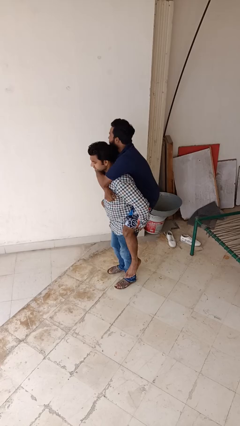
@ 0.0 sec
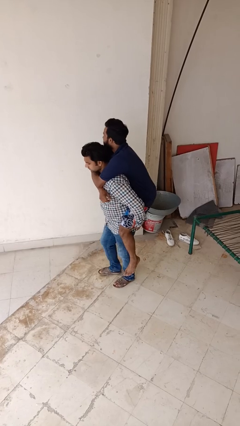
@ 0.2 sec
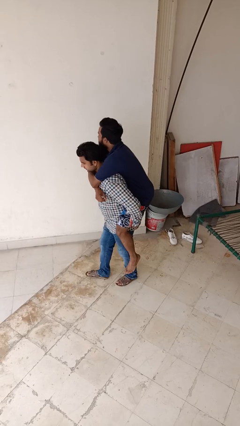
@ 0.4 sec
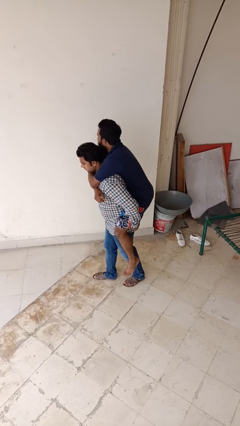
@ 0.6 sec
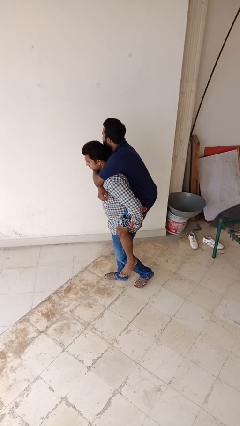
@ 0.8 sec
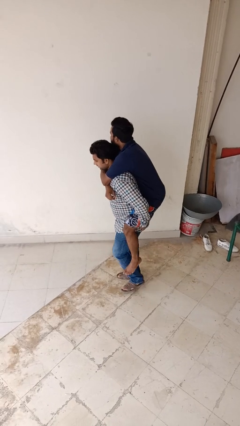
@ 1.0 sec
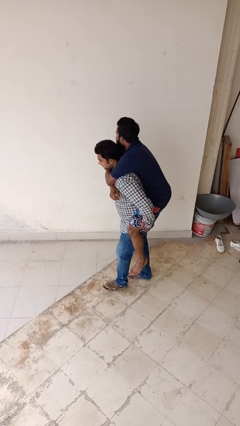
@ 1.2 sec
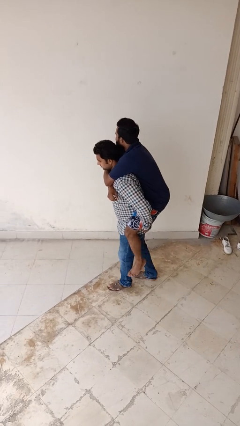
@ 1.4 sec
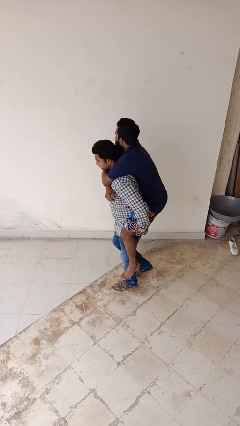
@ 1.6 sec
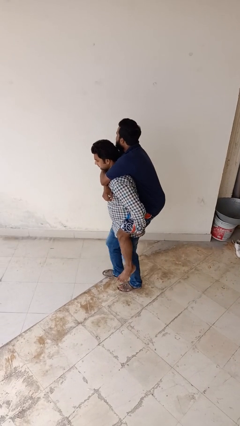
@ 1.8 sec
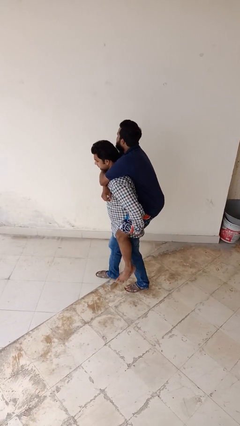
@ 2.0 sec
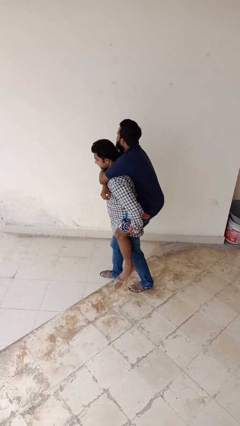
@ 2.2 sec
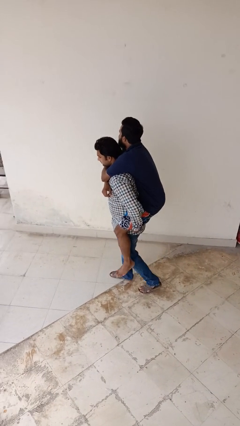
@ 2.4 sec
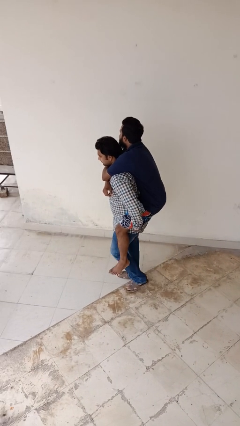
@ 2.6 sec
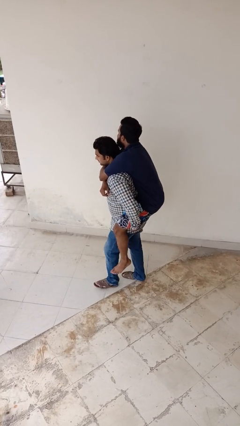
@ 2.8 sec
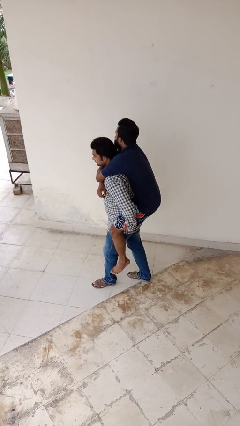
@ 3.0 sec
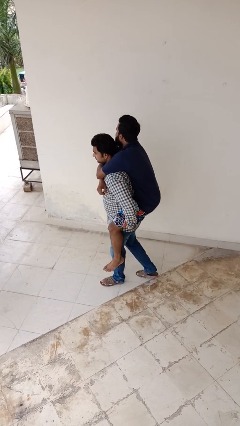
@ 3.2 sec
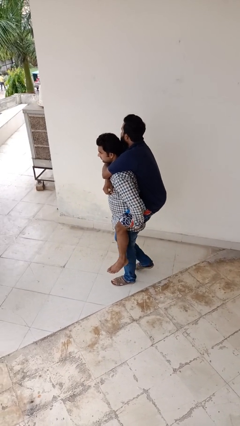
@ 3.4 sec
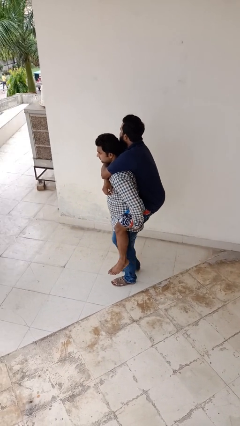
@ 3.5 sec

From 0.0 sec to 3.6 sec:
person carries person on back

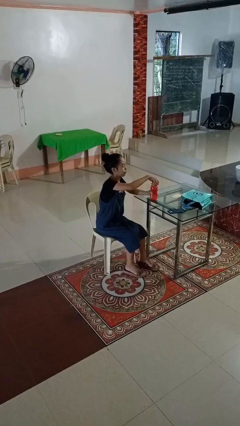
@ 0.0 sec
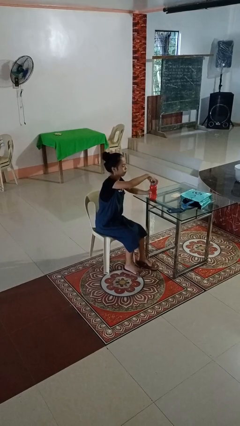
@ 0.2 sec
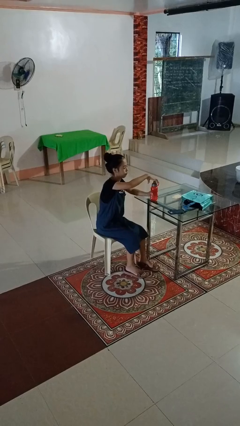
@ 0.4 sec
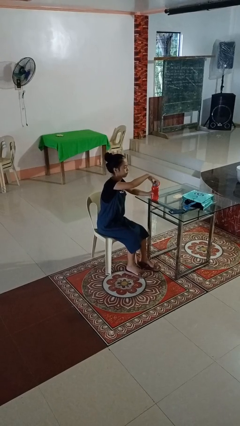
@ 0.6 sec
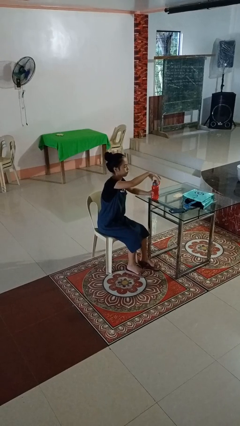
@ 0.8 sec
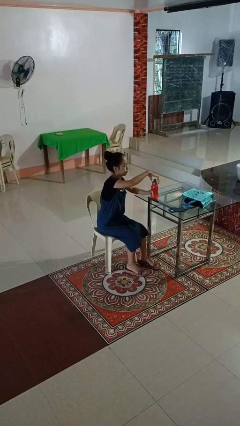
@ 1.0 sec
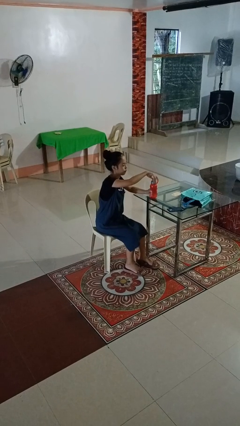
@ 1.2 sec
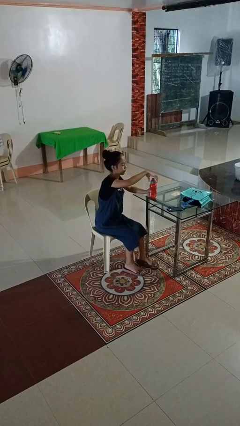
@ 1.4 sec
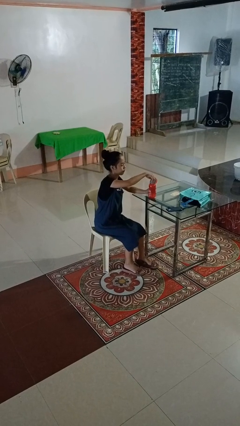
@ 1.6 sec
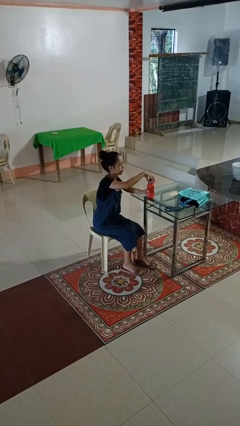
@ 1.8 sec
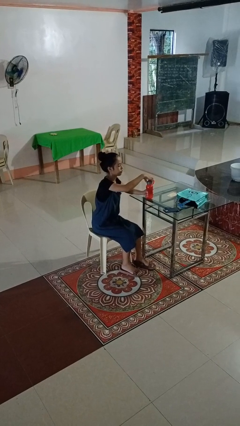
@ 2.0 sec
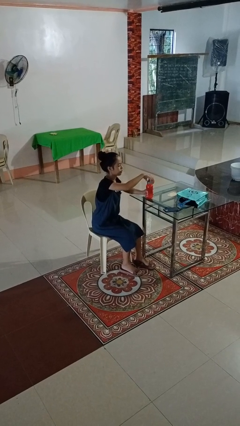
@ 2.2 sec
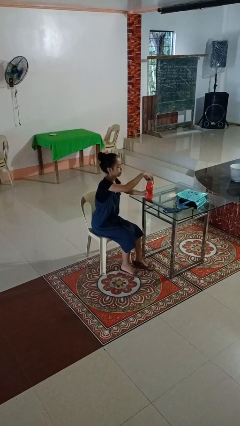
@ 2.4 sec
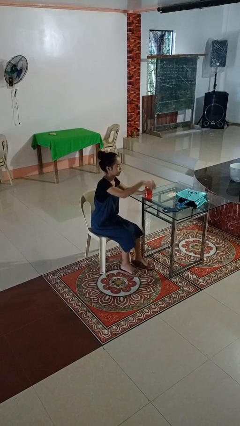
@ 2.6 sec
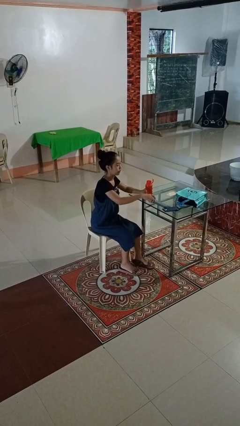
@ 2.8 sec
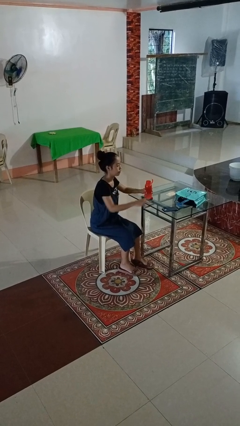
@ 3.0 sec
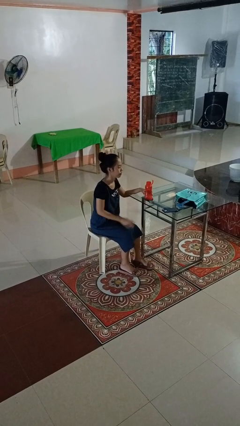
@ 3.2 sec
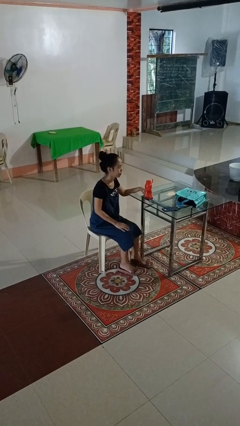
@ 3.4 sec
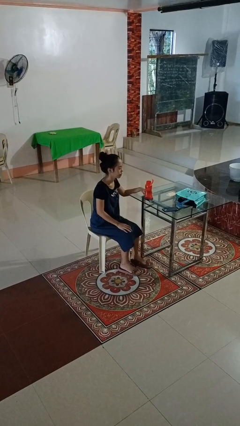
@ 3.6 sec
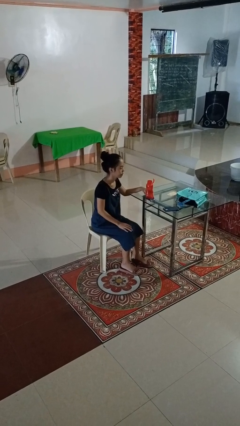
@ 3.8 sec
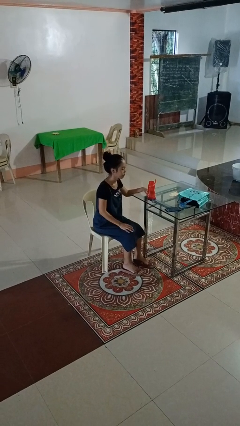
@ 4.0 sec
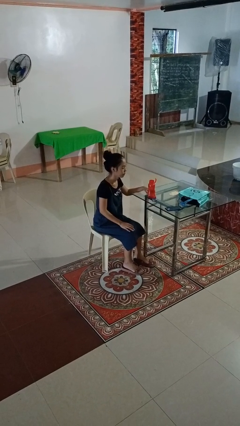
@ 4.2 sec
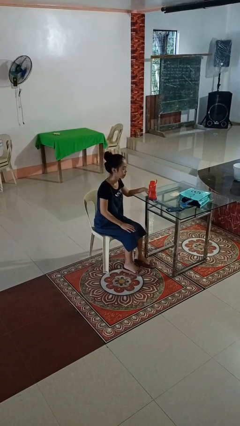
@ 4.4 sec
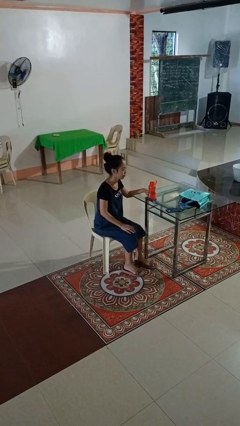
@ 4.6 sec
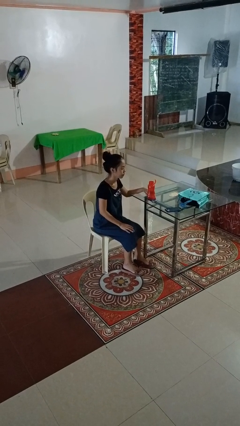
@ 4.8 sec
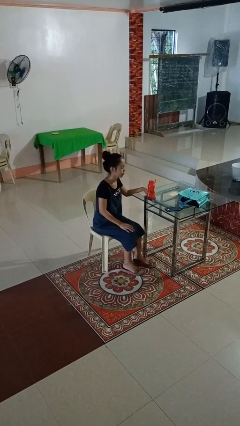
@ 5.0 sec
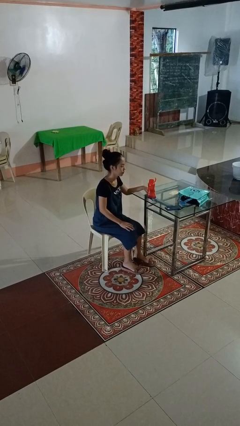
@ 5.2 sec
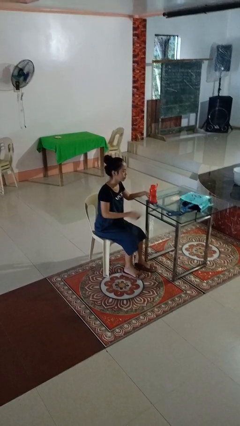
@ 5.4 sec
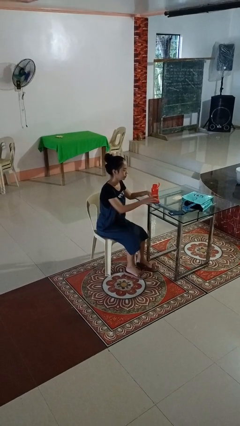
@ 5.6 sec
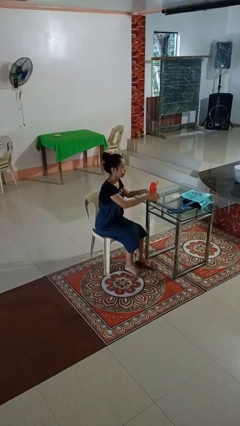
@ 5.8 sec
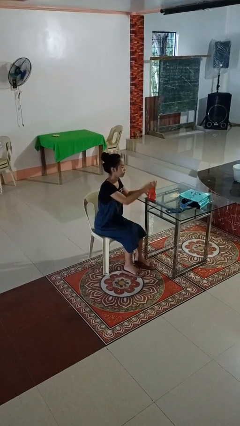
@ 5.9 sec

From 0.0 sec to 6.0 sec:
person unscrews lid from bottle

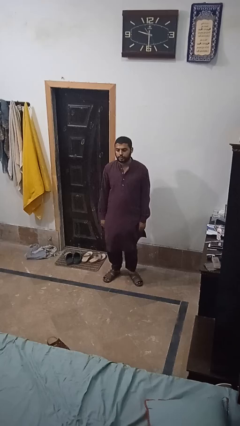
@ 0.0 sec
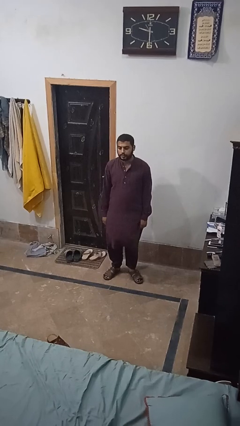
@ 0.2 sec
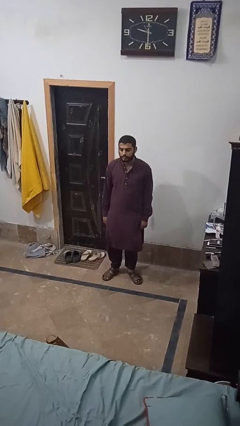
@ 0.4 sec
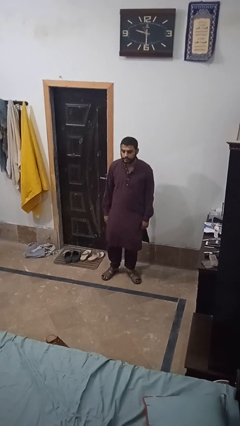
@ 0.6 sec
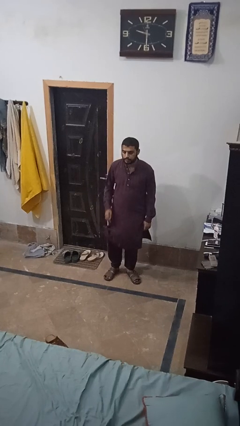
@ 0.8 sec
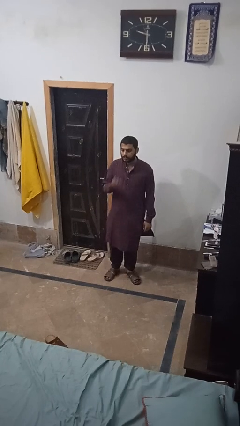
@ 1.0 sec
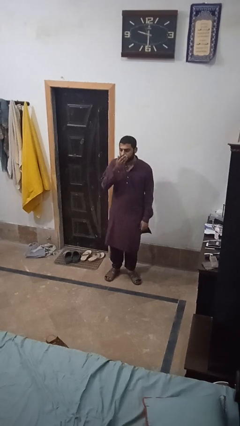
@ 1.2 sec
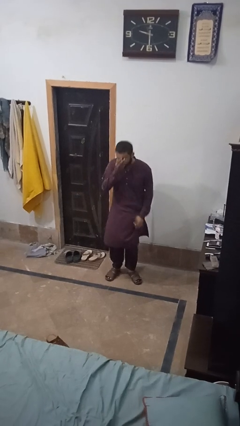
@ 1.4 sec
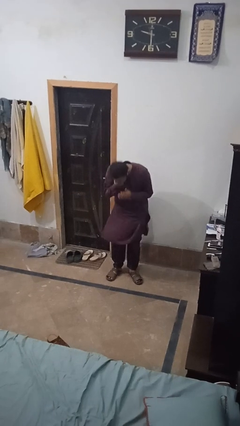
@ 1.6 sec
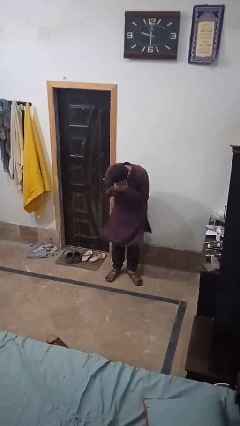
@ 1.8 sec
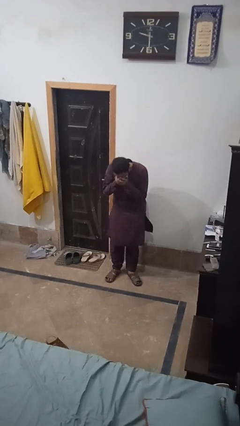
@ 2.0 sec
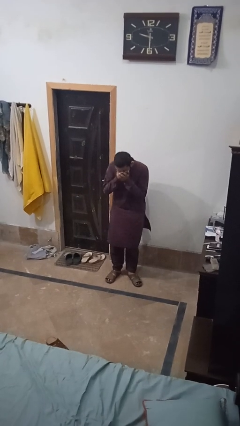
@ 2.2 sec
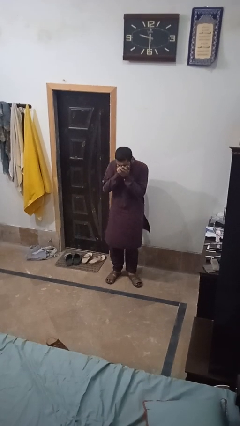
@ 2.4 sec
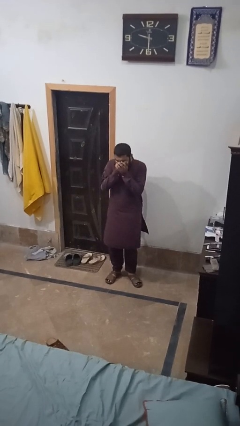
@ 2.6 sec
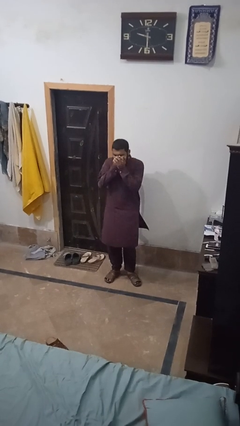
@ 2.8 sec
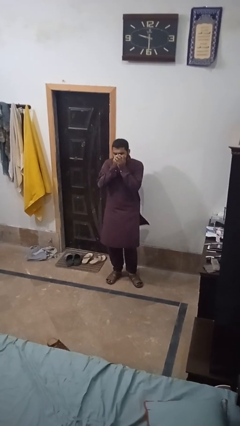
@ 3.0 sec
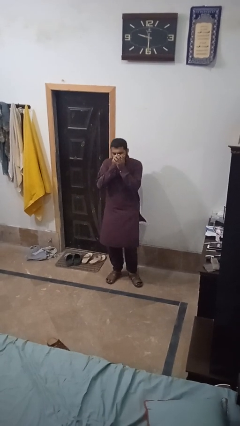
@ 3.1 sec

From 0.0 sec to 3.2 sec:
person sneezes into hand

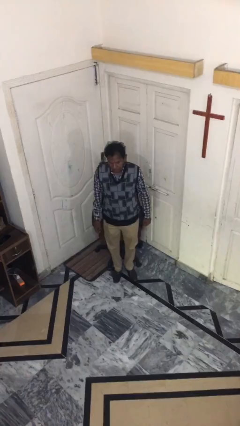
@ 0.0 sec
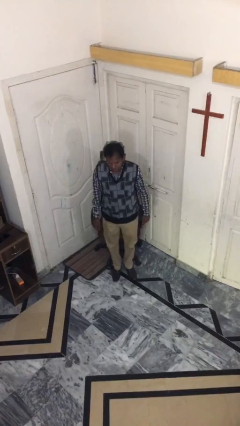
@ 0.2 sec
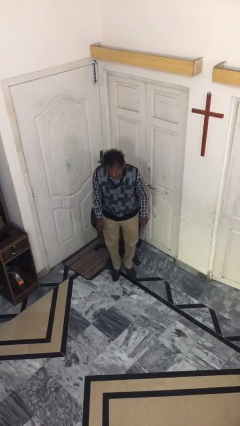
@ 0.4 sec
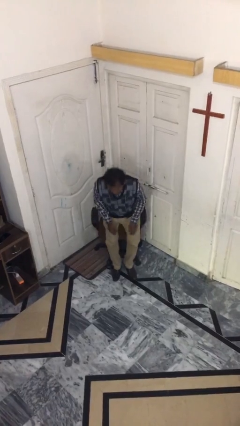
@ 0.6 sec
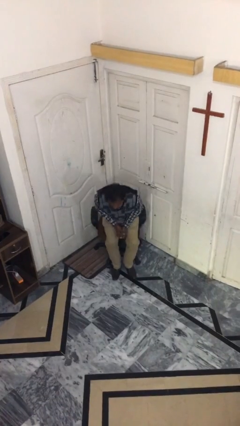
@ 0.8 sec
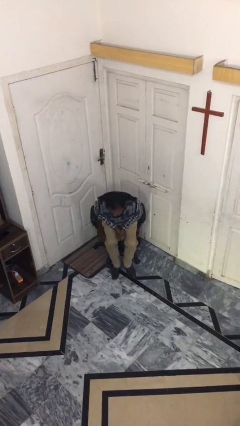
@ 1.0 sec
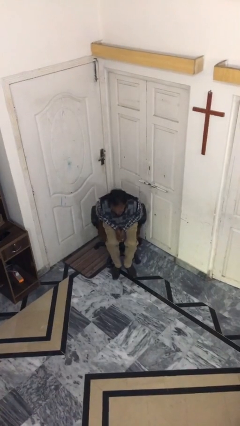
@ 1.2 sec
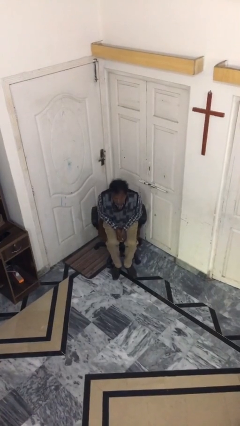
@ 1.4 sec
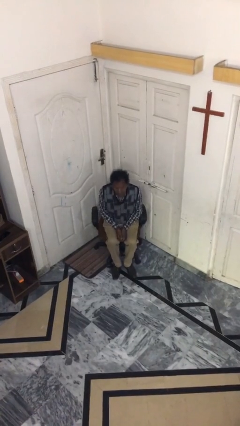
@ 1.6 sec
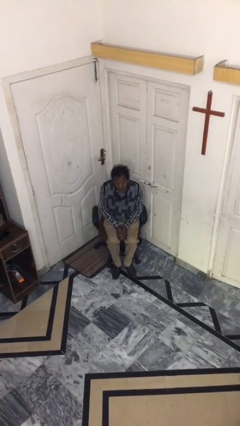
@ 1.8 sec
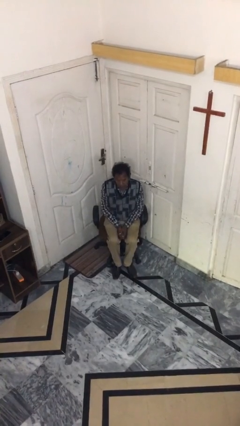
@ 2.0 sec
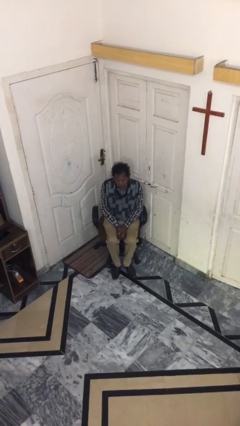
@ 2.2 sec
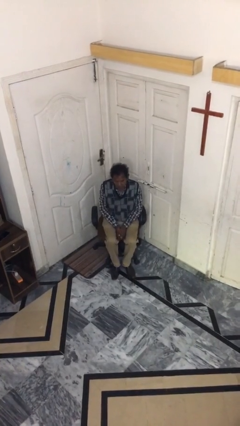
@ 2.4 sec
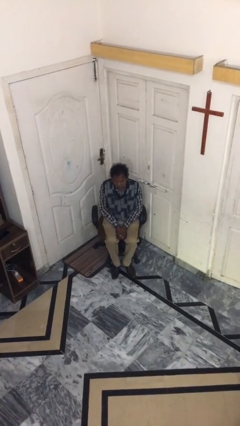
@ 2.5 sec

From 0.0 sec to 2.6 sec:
person sits down

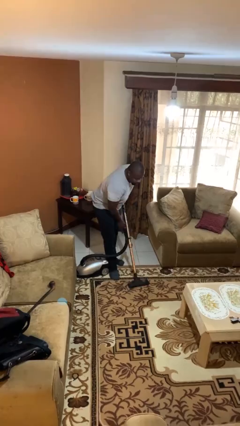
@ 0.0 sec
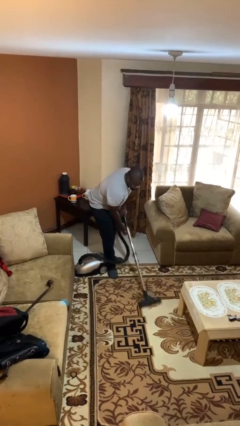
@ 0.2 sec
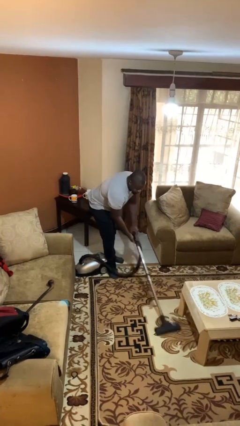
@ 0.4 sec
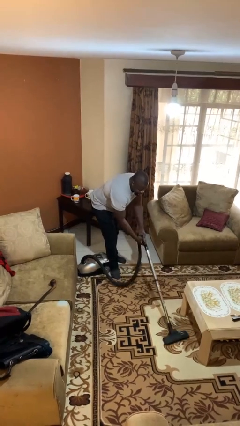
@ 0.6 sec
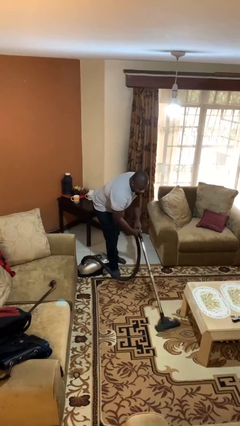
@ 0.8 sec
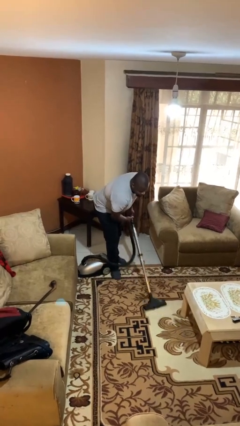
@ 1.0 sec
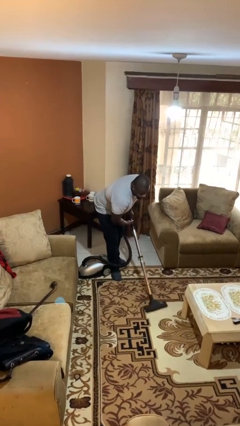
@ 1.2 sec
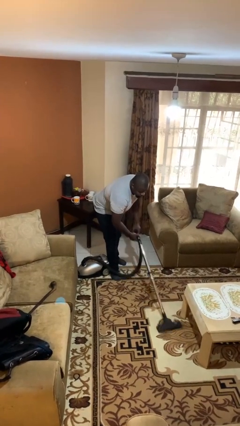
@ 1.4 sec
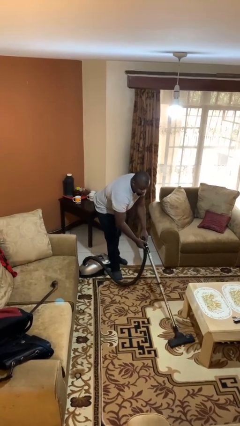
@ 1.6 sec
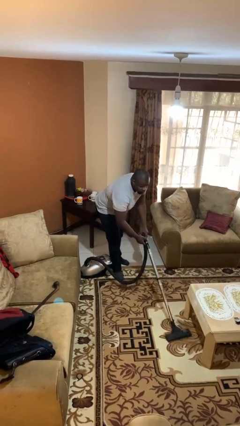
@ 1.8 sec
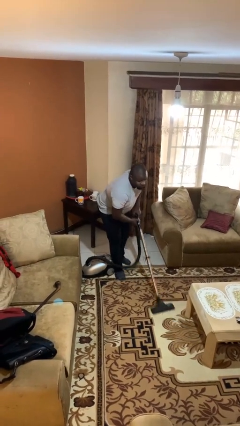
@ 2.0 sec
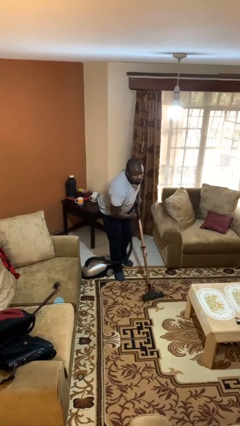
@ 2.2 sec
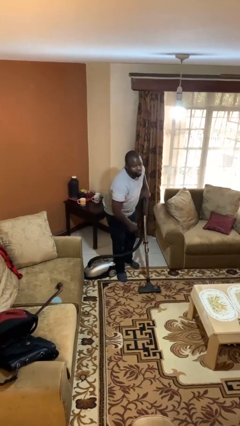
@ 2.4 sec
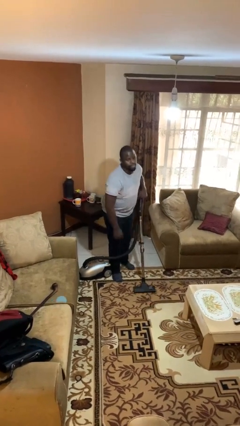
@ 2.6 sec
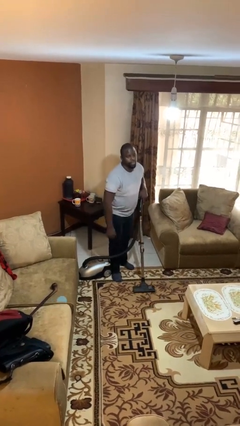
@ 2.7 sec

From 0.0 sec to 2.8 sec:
person vacuums carpet
